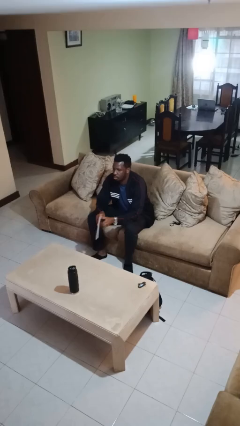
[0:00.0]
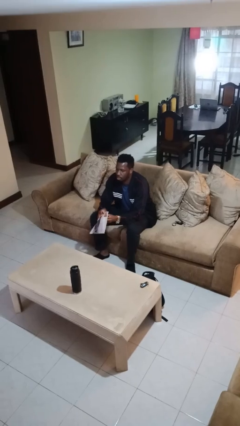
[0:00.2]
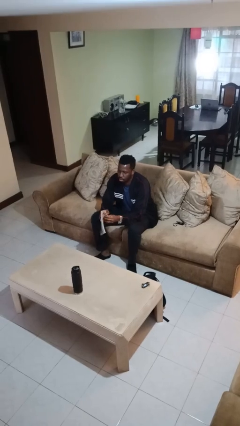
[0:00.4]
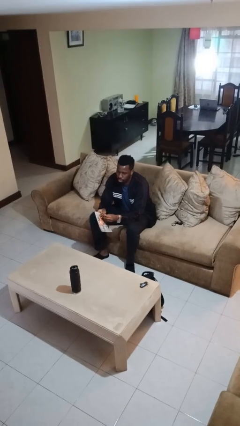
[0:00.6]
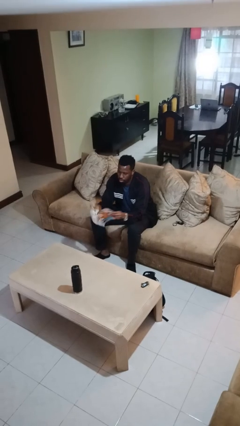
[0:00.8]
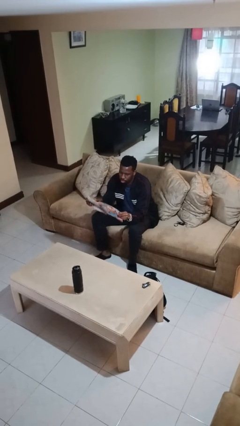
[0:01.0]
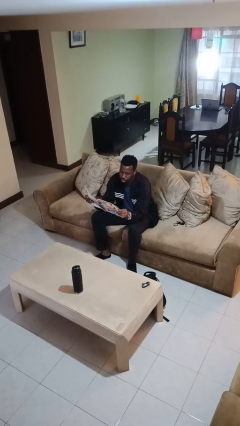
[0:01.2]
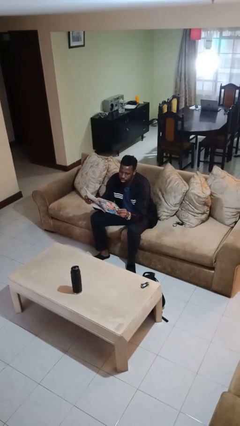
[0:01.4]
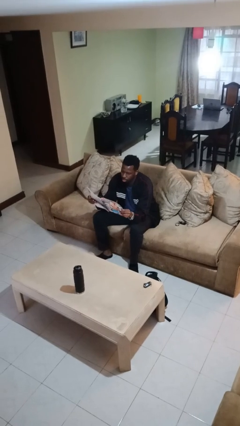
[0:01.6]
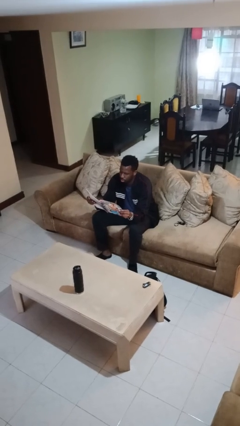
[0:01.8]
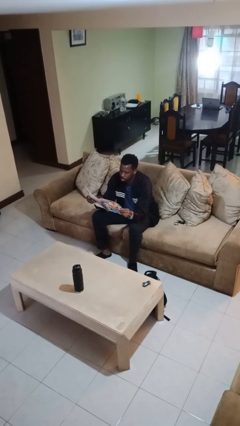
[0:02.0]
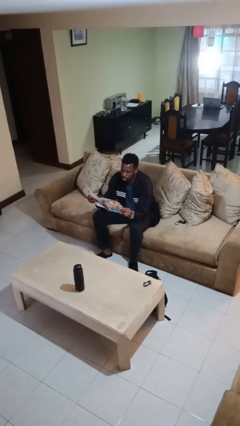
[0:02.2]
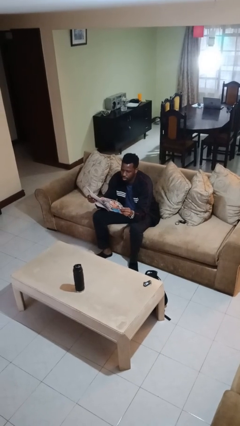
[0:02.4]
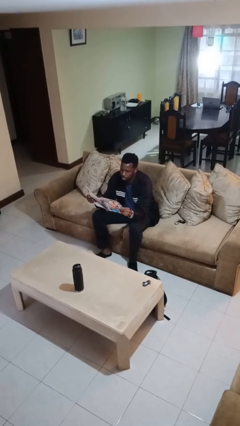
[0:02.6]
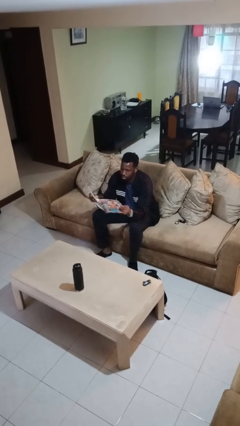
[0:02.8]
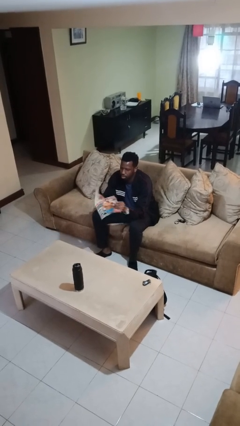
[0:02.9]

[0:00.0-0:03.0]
person reads magazine

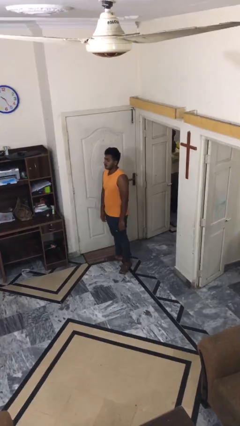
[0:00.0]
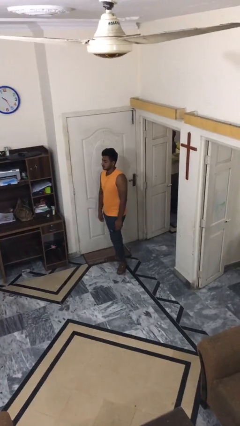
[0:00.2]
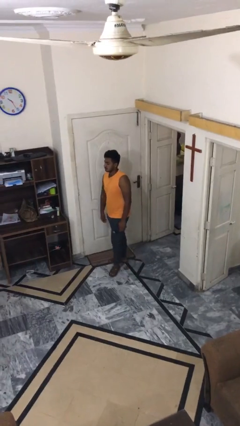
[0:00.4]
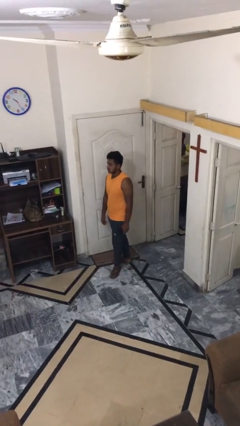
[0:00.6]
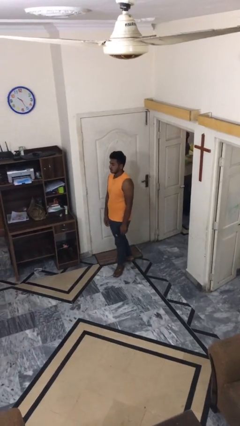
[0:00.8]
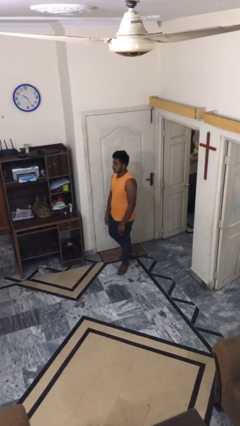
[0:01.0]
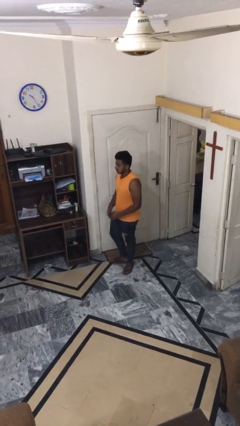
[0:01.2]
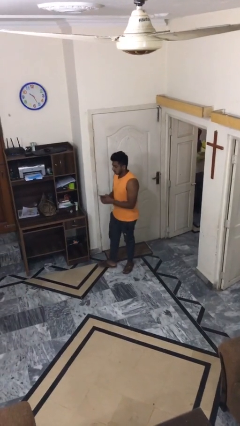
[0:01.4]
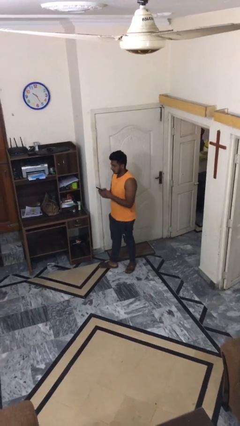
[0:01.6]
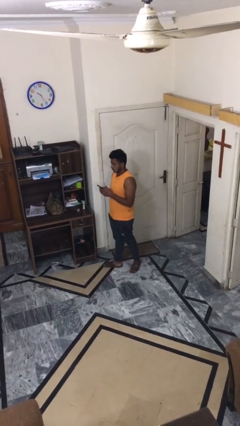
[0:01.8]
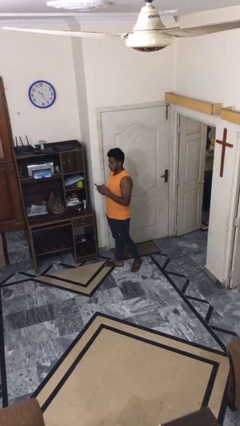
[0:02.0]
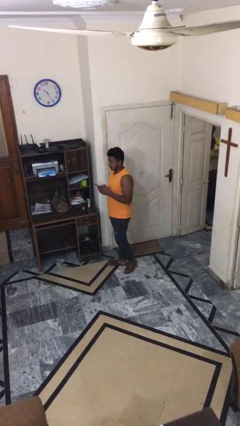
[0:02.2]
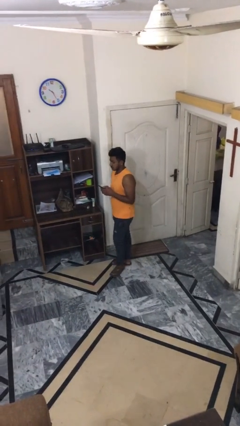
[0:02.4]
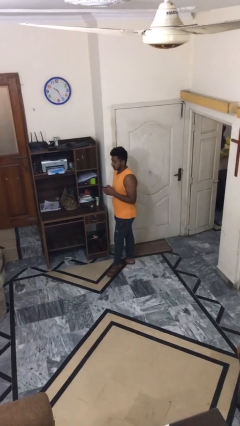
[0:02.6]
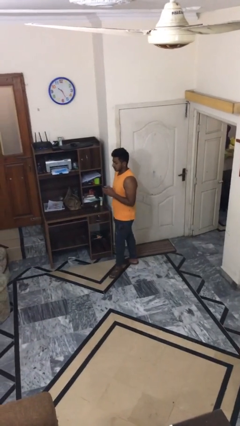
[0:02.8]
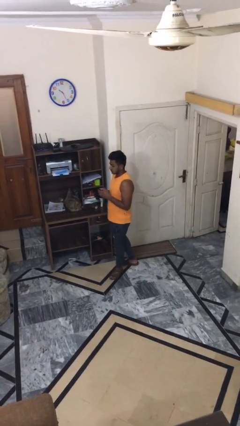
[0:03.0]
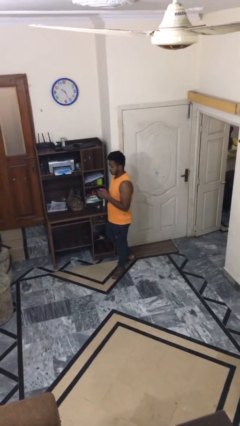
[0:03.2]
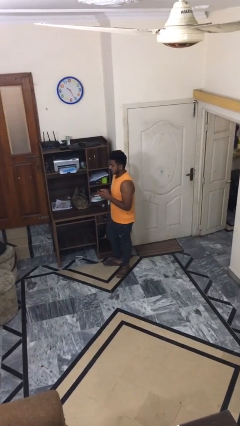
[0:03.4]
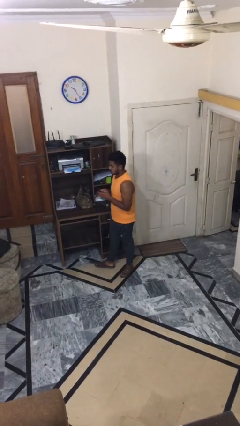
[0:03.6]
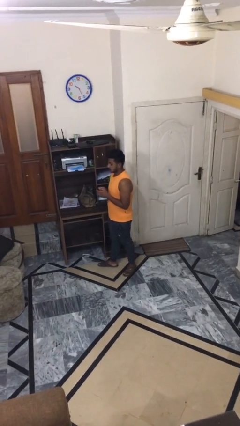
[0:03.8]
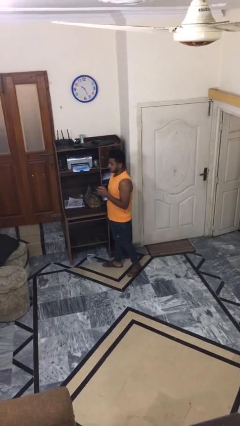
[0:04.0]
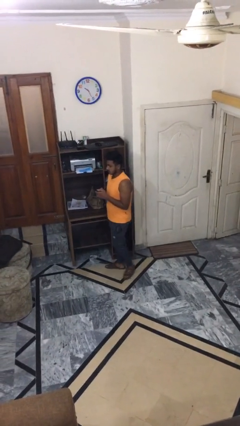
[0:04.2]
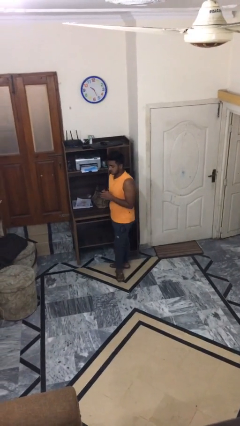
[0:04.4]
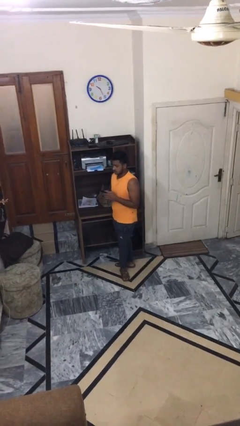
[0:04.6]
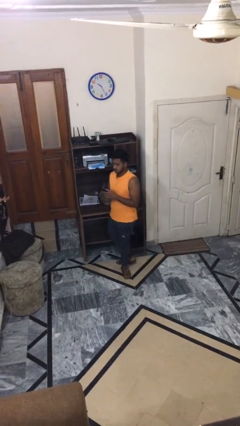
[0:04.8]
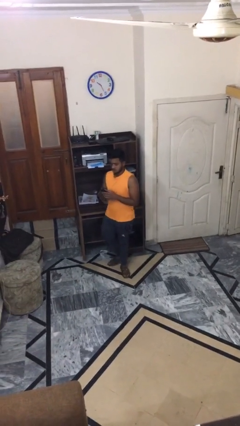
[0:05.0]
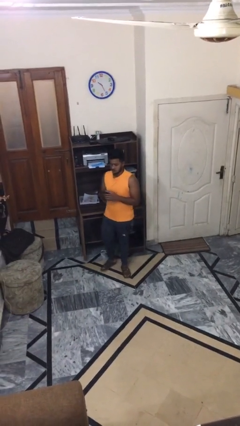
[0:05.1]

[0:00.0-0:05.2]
person texts on phone

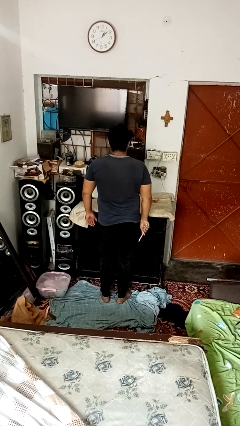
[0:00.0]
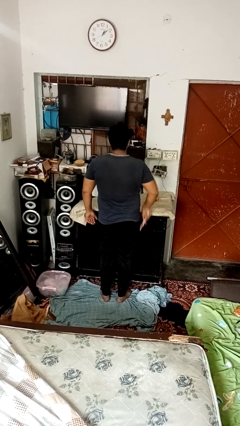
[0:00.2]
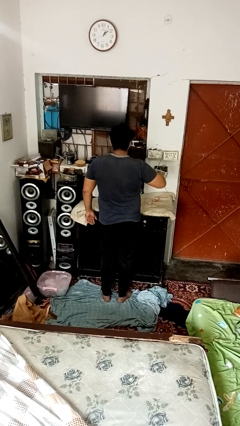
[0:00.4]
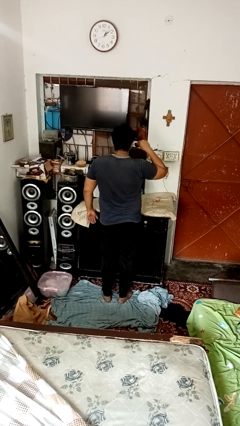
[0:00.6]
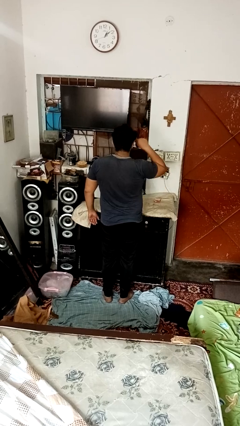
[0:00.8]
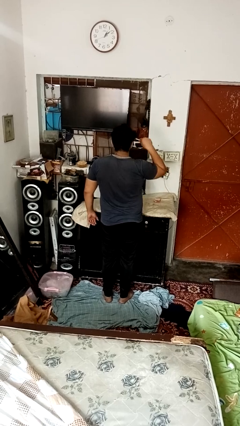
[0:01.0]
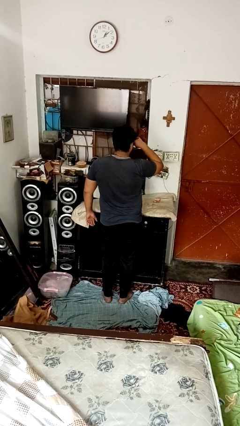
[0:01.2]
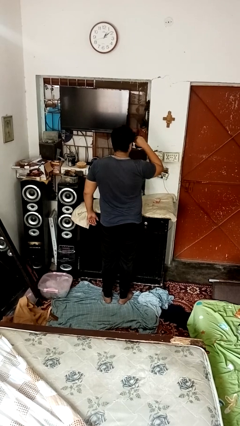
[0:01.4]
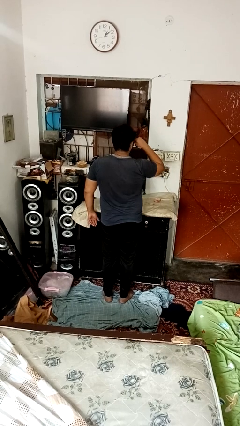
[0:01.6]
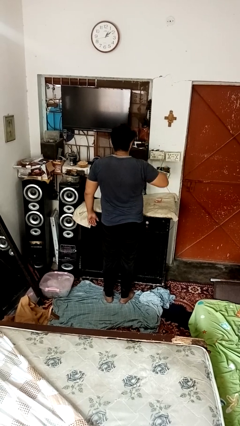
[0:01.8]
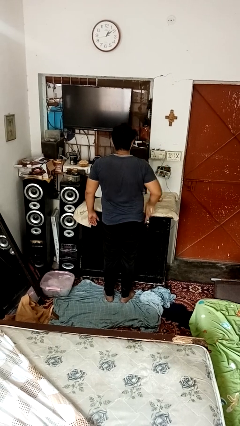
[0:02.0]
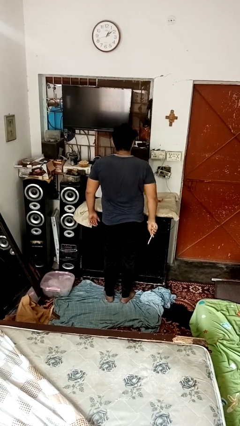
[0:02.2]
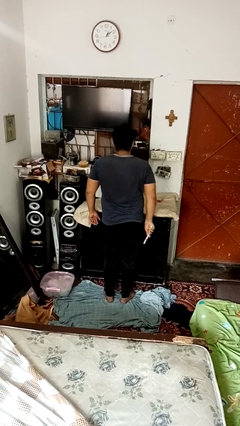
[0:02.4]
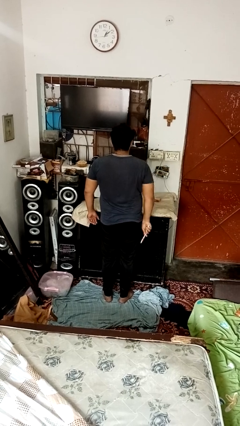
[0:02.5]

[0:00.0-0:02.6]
person applies eye makeup

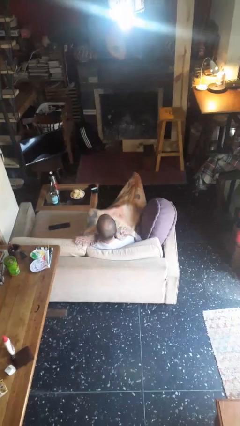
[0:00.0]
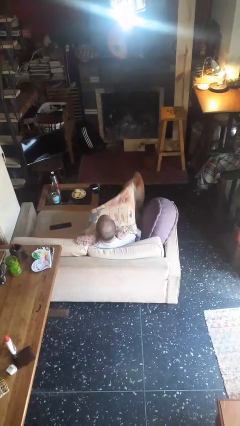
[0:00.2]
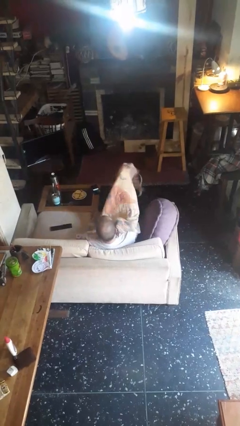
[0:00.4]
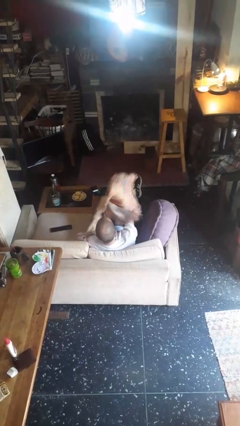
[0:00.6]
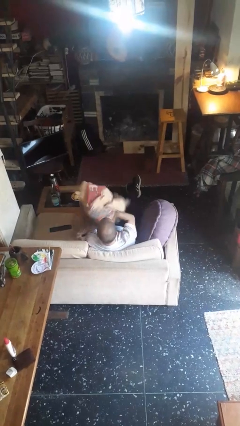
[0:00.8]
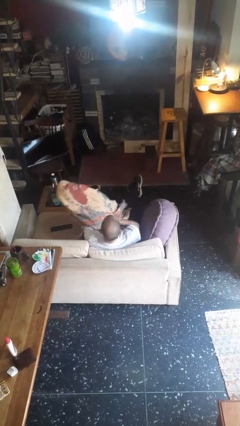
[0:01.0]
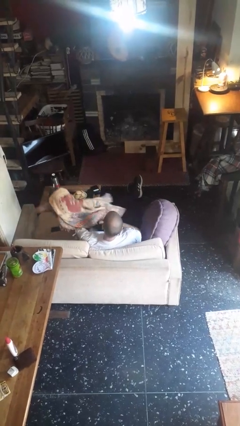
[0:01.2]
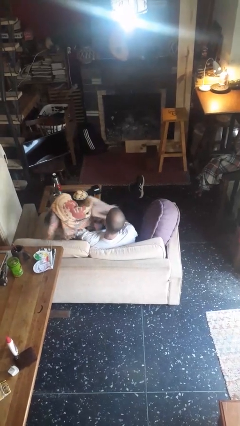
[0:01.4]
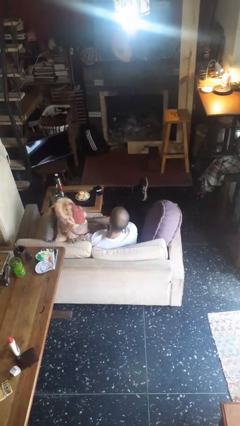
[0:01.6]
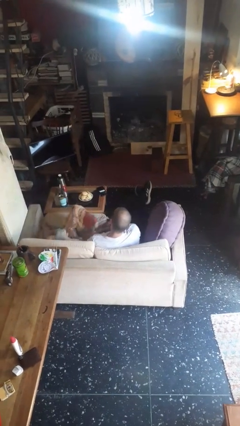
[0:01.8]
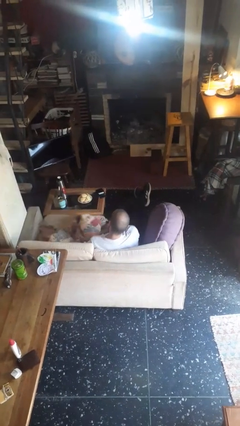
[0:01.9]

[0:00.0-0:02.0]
person uncovers with blanket

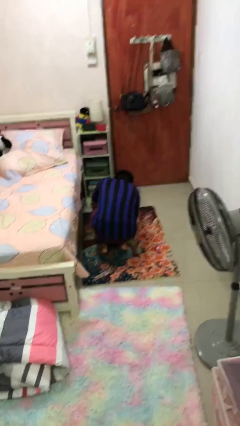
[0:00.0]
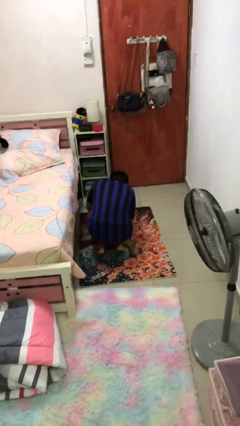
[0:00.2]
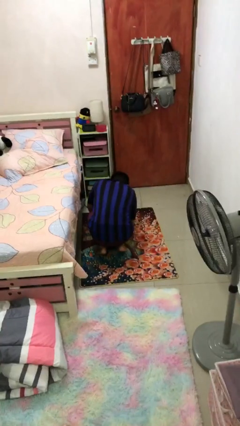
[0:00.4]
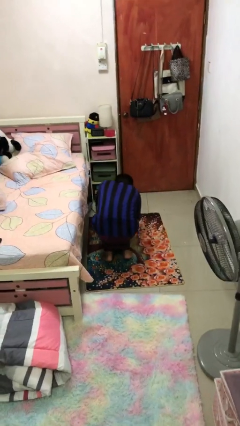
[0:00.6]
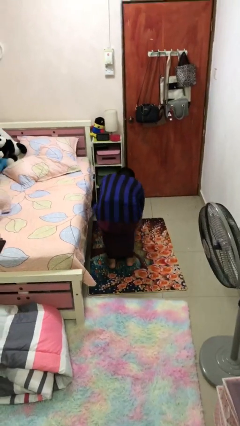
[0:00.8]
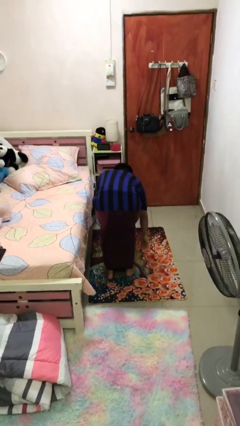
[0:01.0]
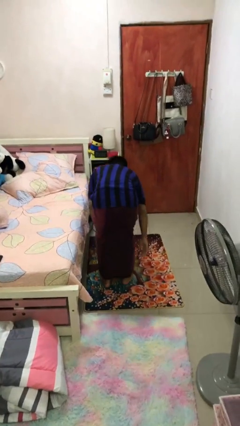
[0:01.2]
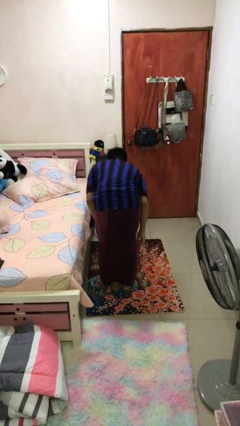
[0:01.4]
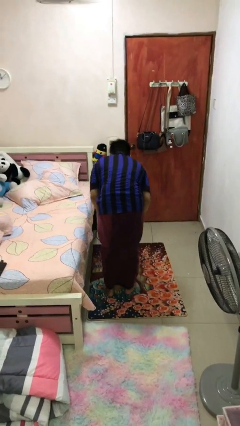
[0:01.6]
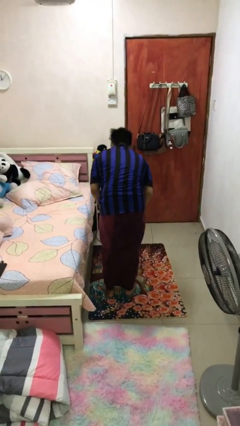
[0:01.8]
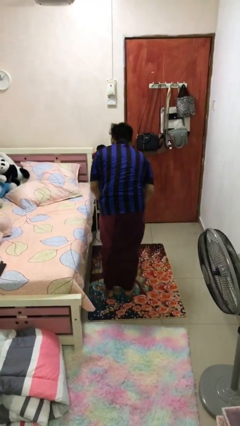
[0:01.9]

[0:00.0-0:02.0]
person stands up from floor

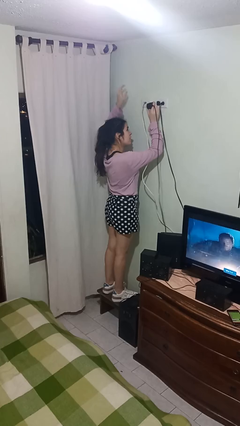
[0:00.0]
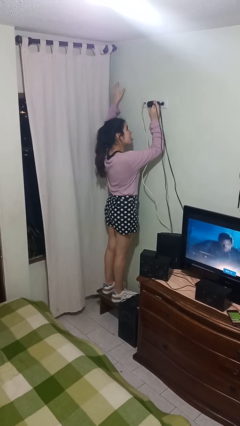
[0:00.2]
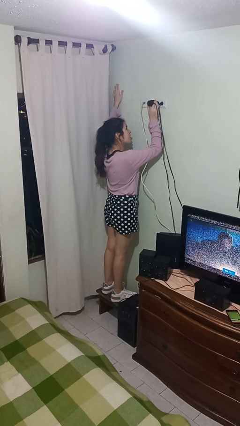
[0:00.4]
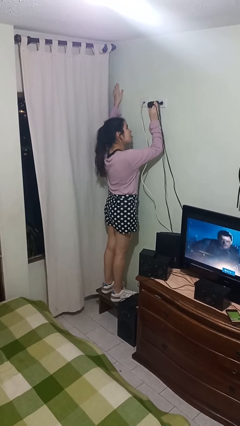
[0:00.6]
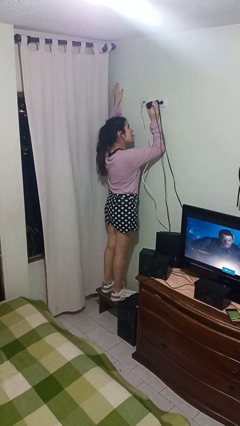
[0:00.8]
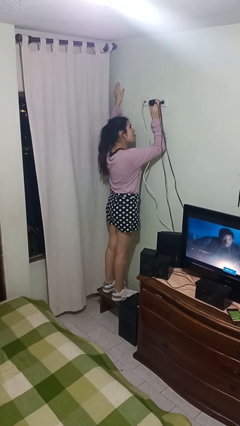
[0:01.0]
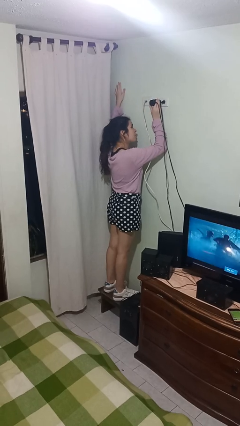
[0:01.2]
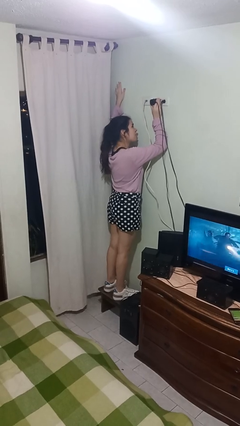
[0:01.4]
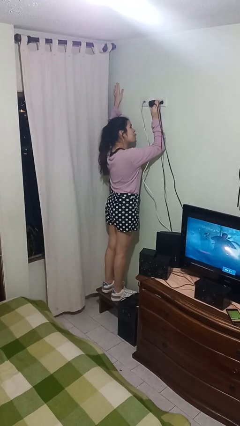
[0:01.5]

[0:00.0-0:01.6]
person plugs into electrical socket

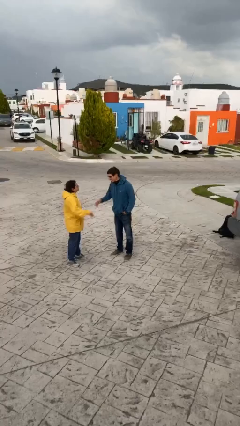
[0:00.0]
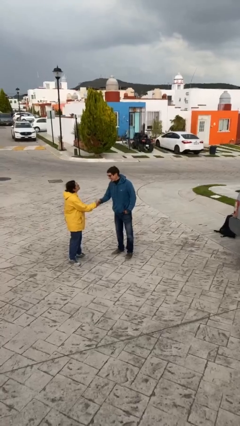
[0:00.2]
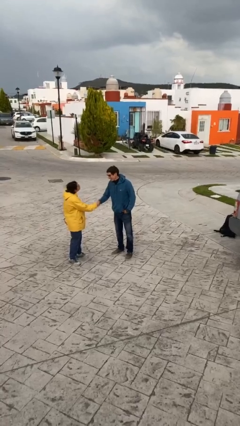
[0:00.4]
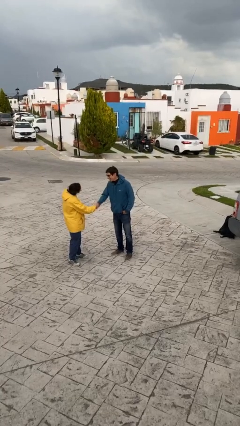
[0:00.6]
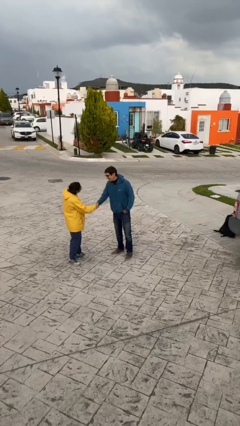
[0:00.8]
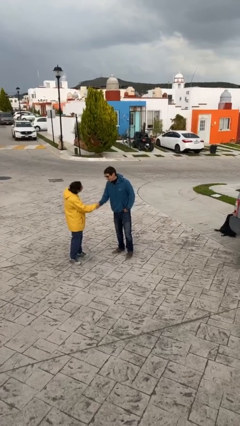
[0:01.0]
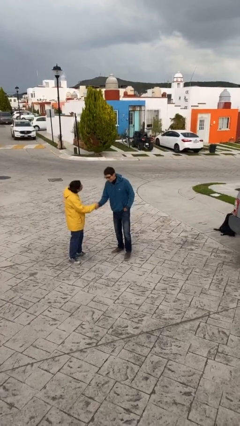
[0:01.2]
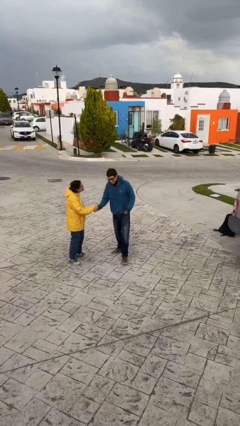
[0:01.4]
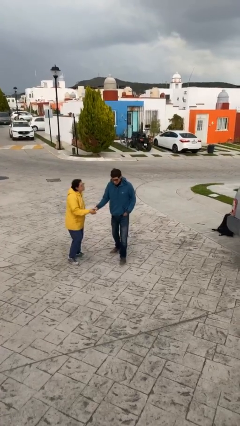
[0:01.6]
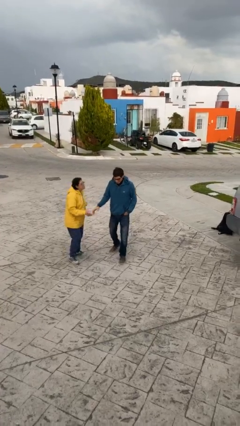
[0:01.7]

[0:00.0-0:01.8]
person shakes hand
